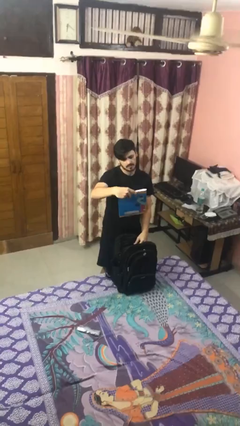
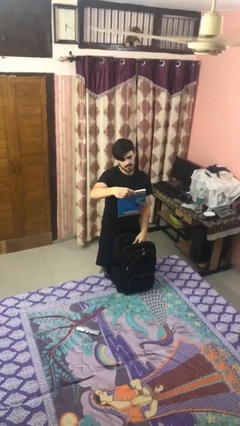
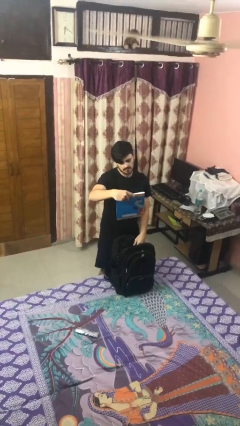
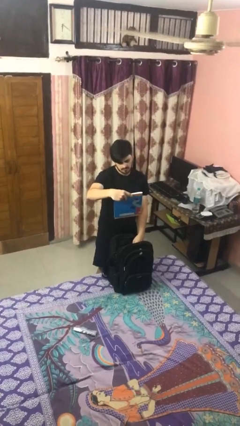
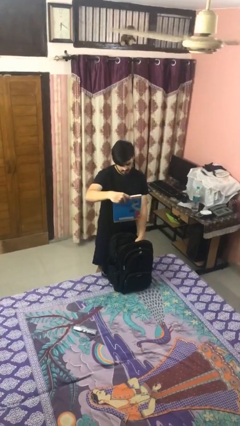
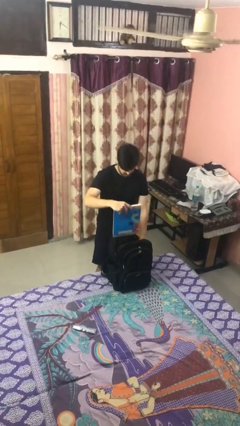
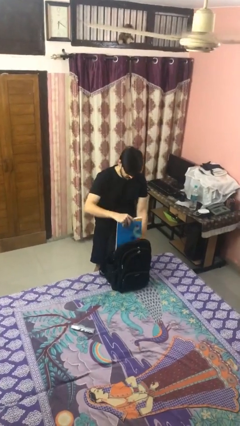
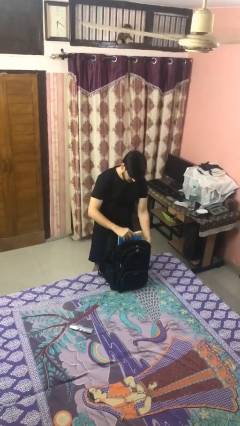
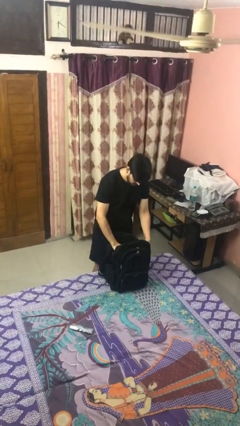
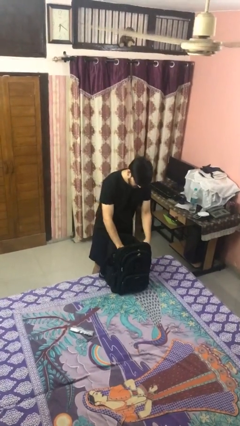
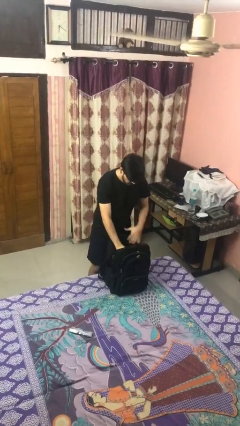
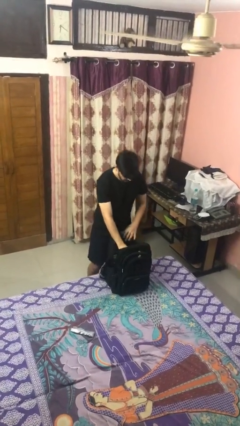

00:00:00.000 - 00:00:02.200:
person puts object into backpack

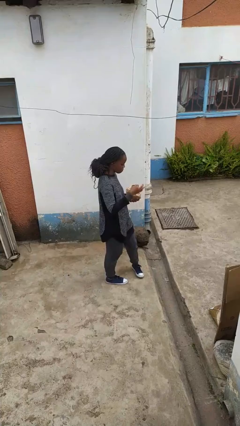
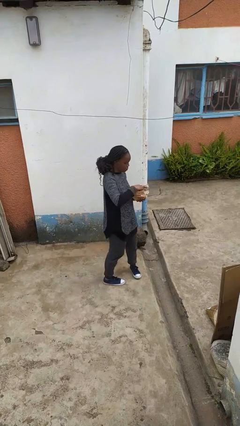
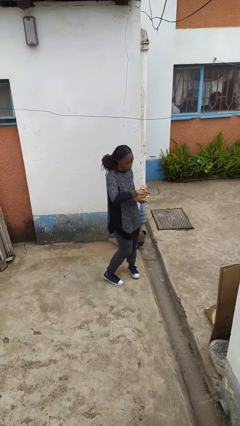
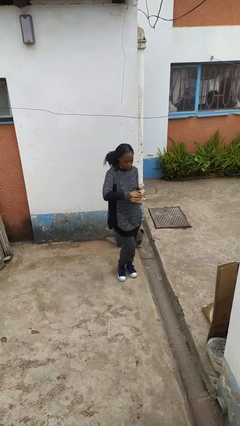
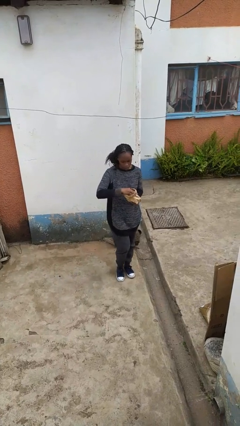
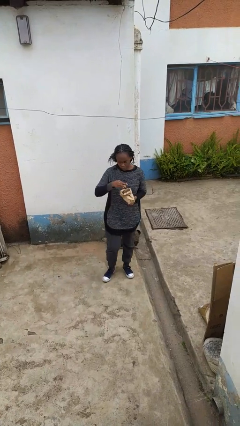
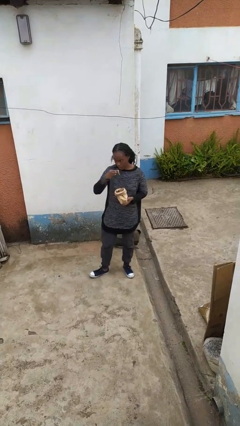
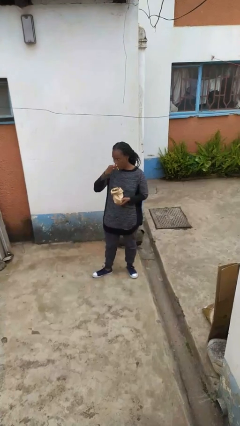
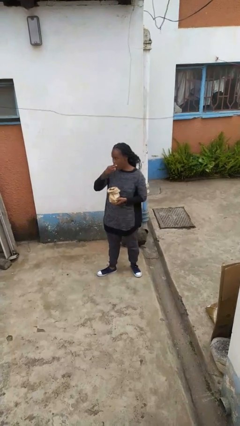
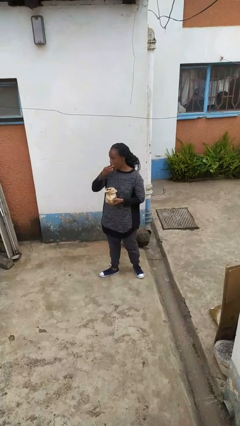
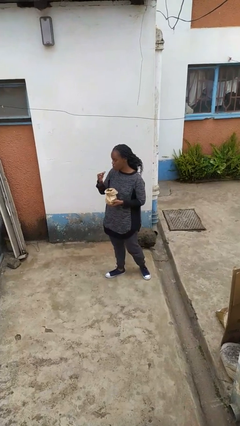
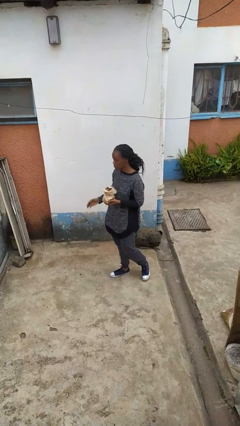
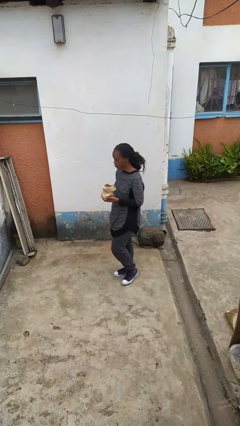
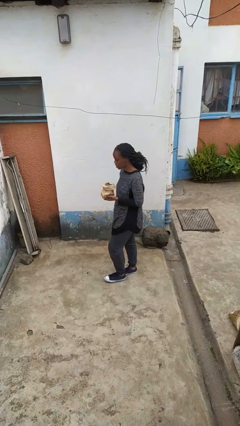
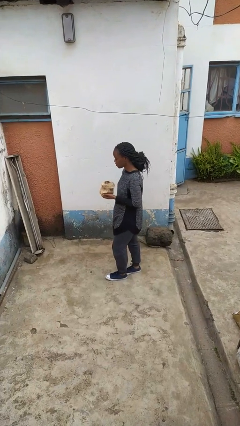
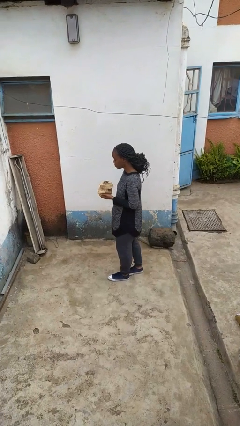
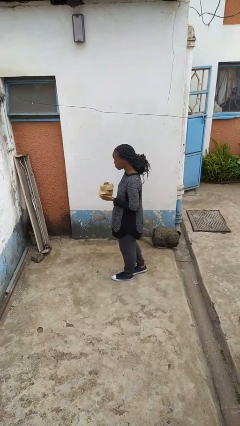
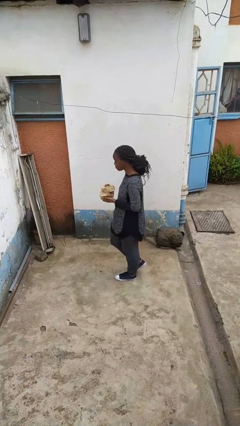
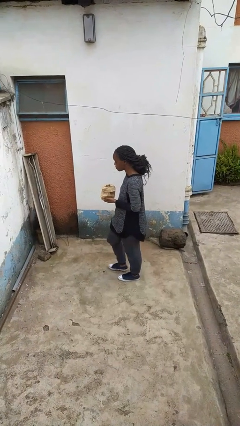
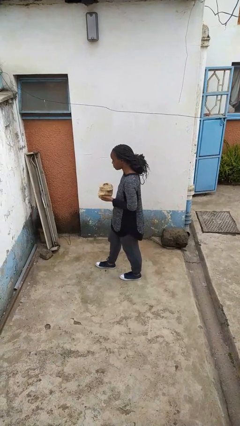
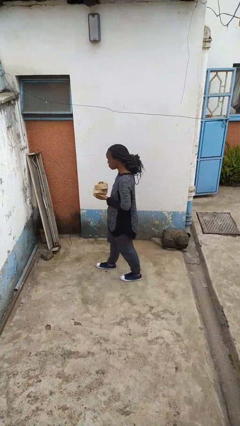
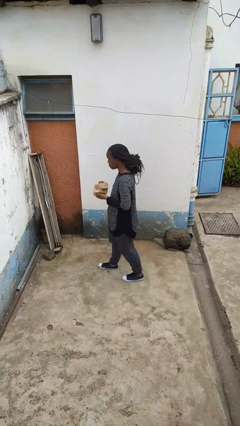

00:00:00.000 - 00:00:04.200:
person eats snack from bag

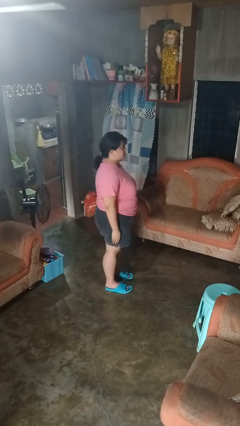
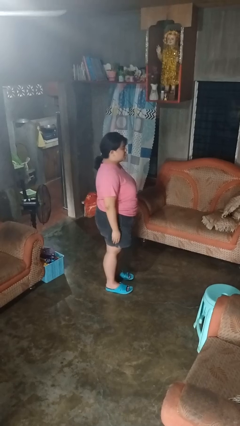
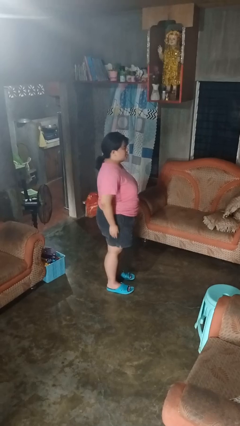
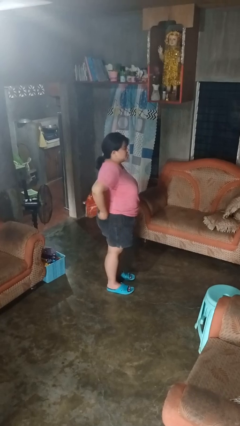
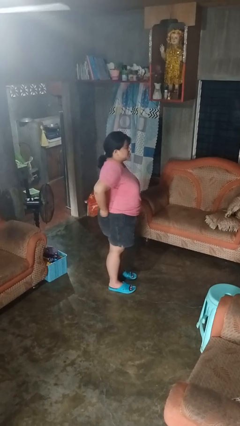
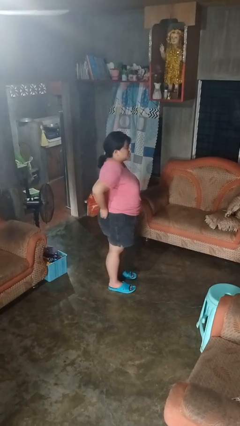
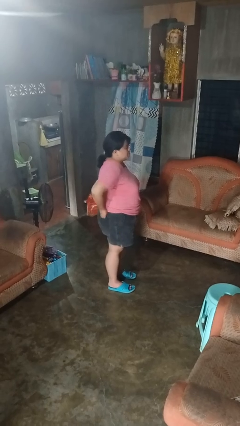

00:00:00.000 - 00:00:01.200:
person puts hands in back pockets

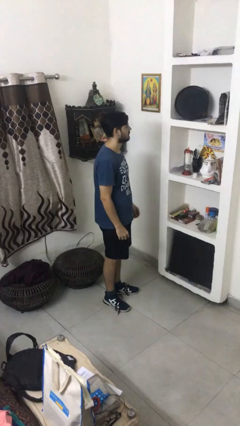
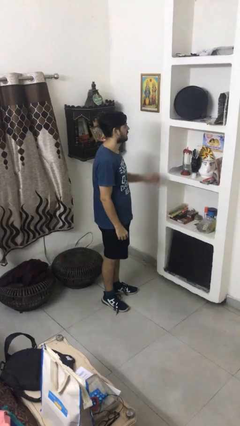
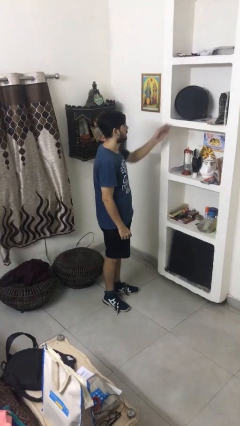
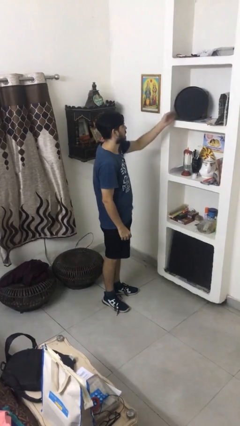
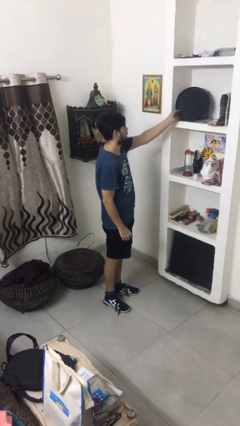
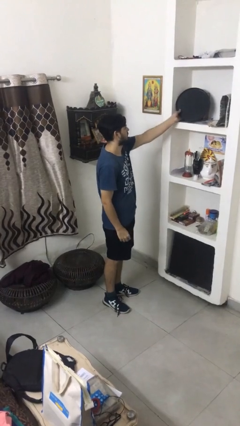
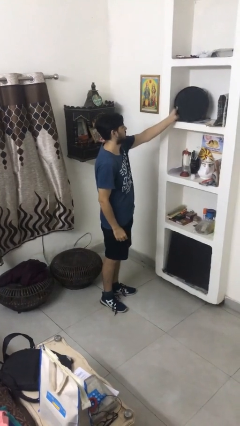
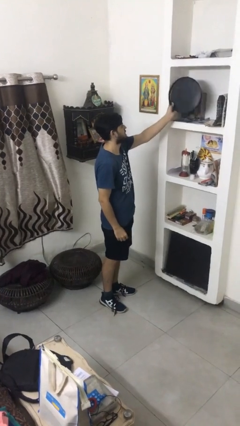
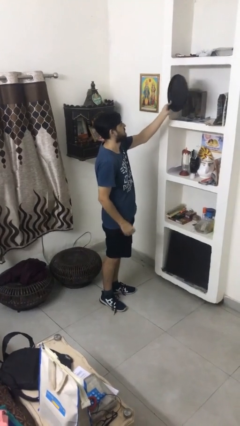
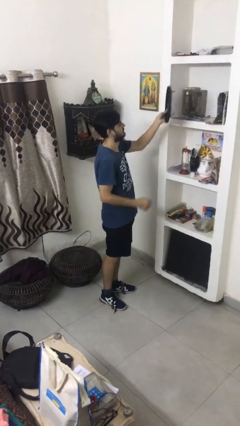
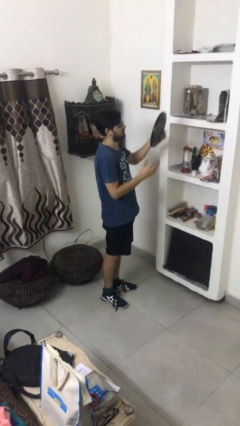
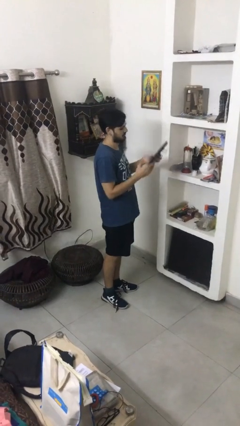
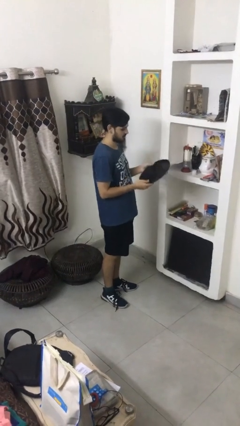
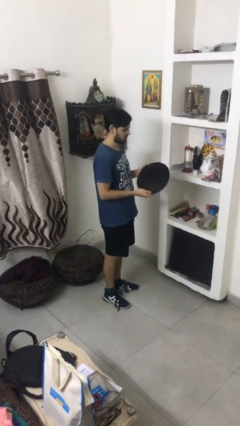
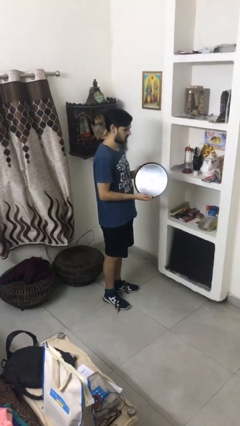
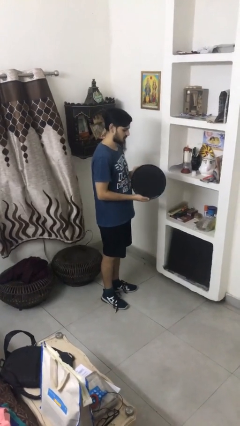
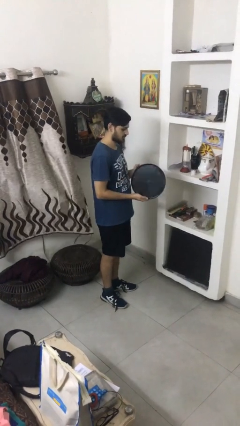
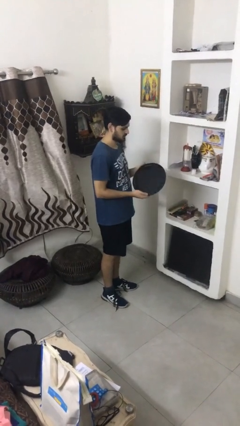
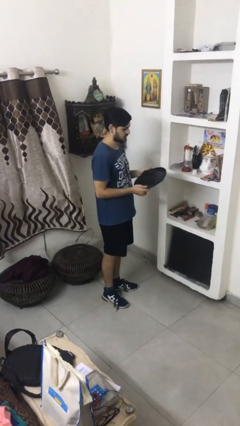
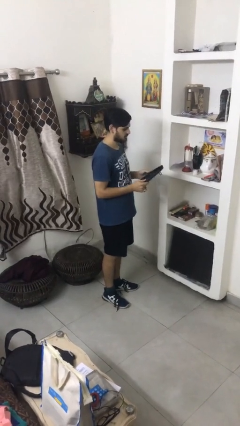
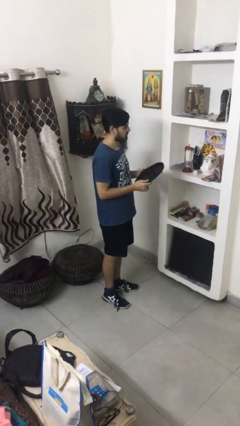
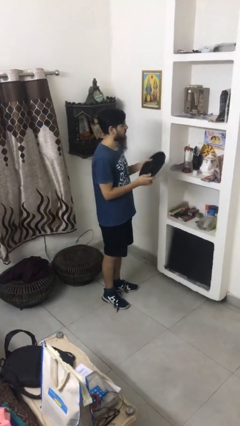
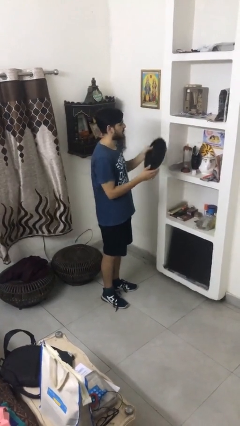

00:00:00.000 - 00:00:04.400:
person picks up object from shelf

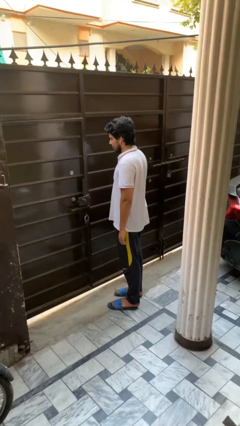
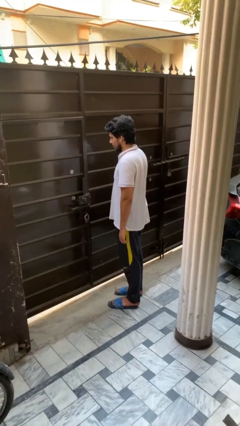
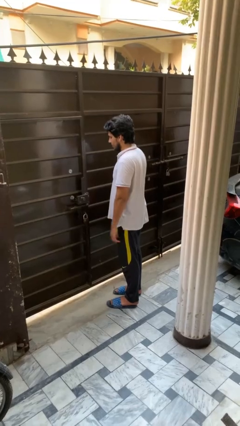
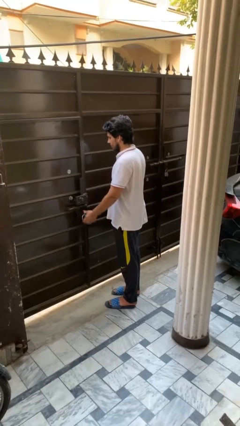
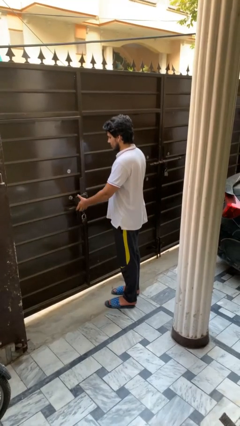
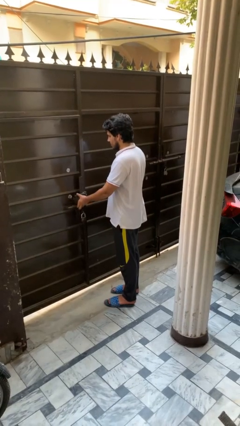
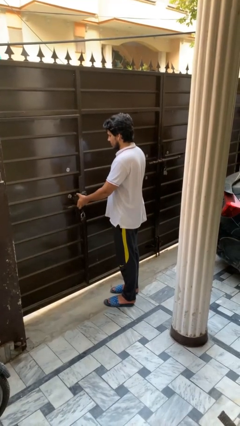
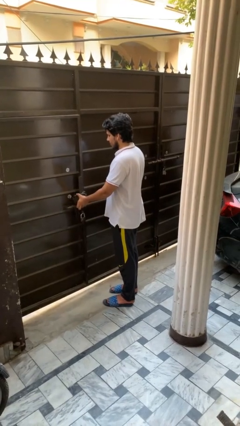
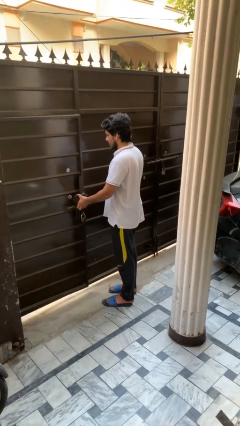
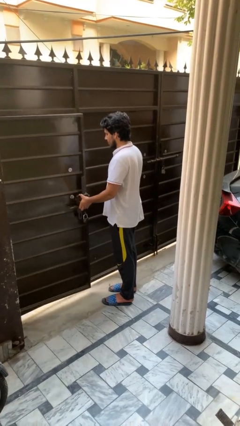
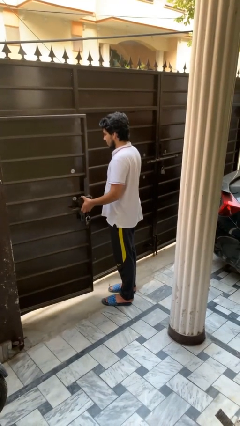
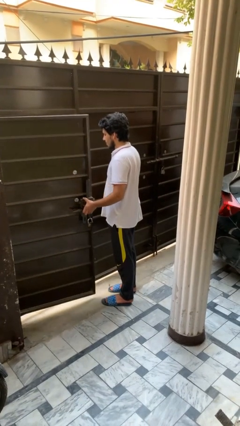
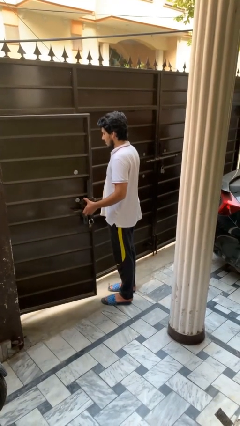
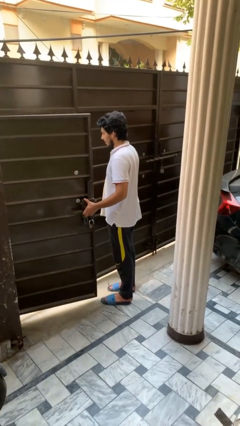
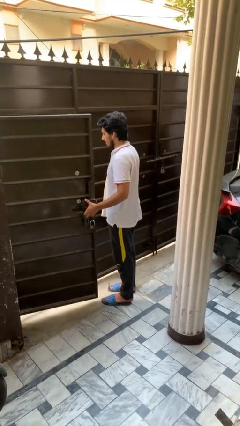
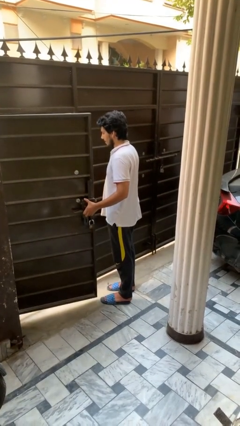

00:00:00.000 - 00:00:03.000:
person opens gate

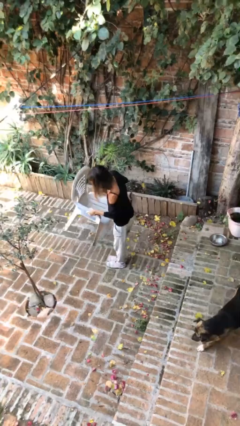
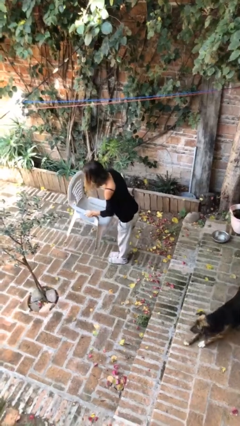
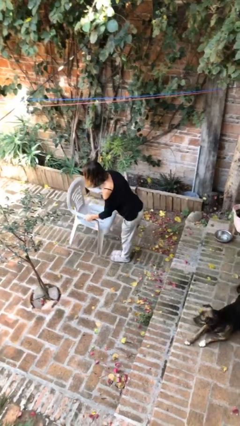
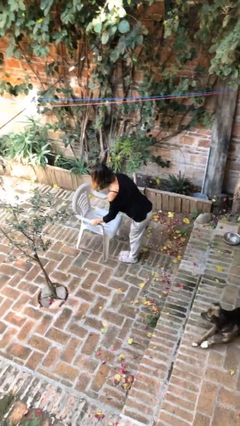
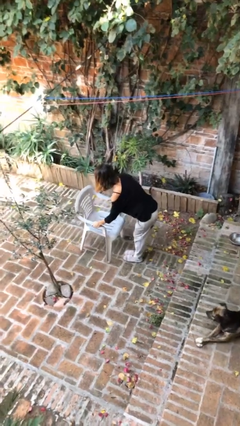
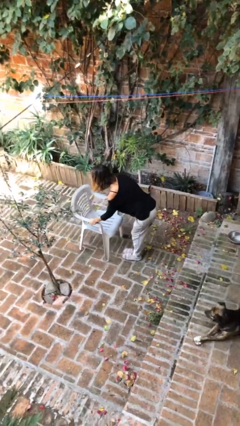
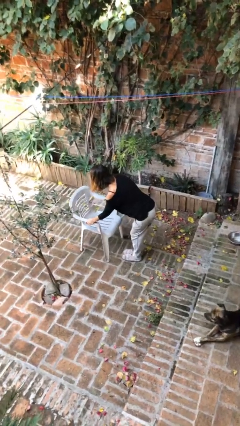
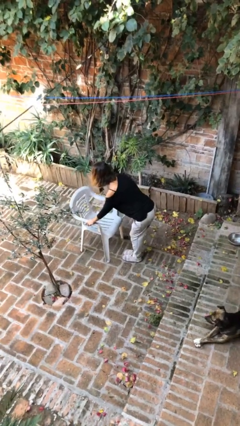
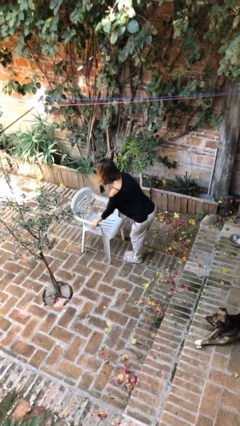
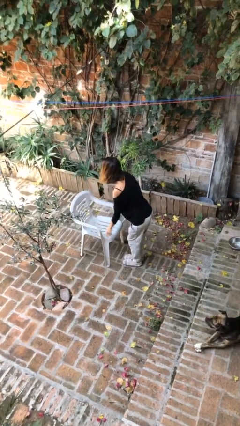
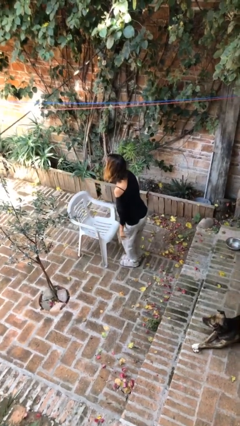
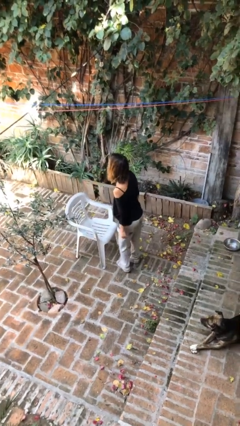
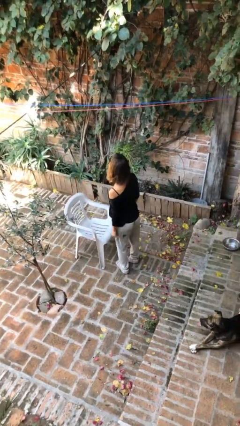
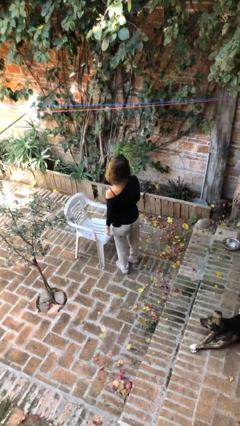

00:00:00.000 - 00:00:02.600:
person puts down object on floor
